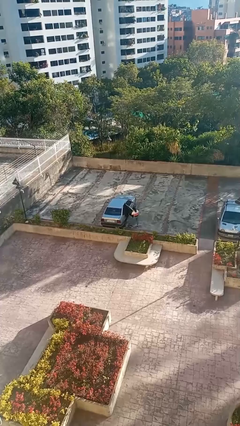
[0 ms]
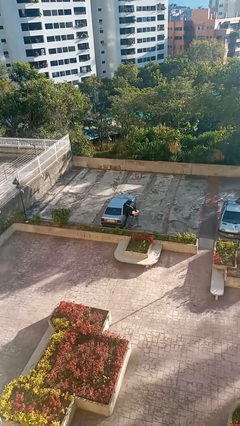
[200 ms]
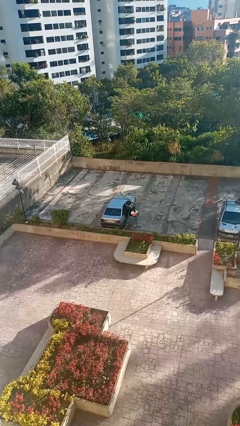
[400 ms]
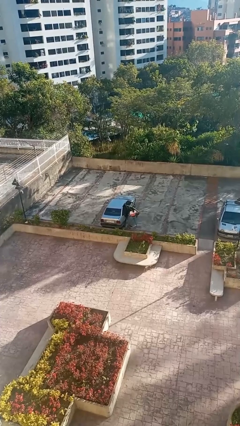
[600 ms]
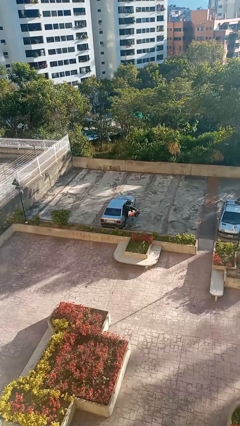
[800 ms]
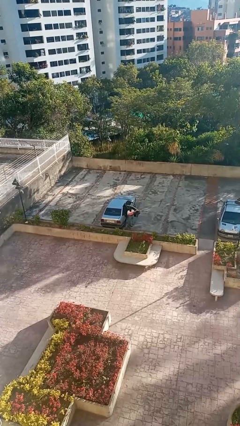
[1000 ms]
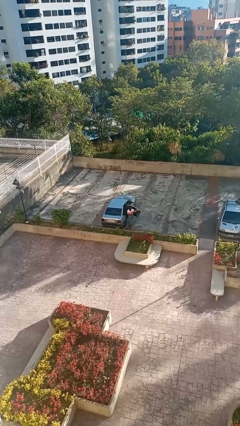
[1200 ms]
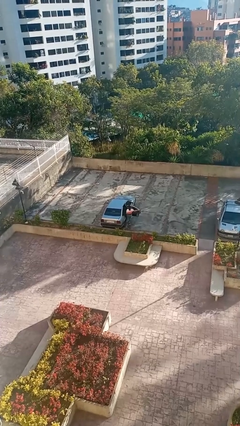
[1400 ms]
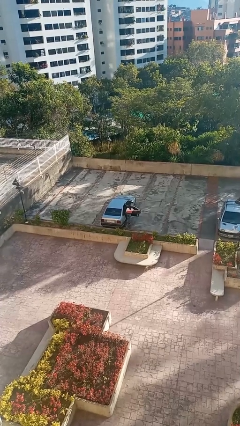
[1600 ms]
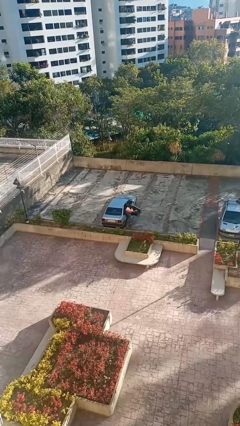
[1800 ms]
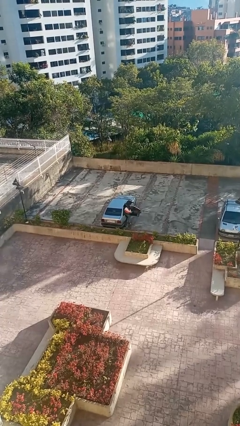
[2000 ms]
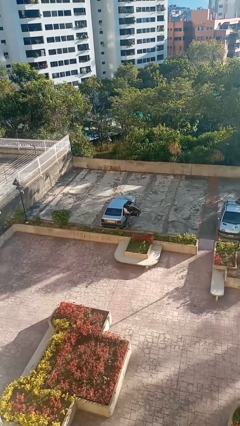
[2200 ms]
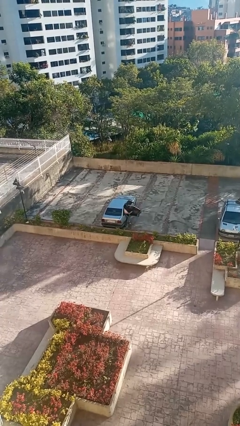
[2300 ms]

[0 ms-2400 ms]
car picks up person

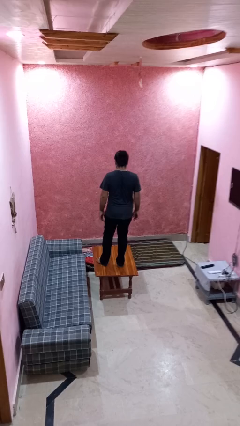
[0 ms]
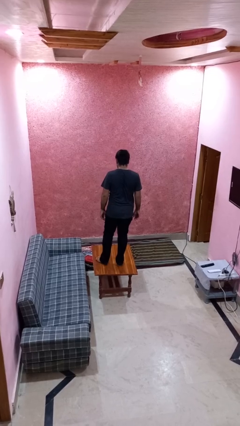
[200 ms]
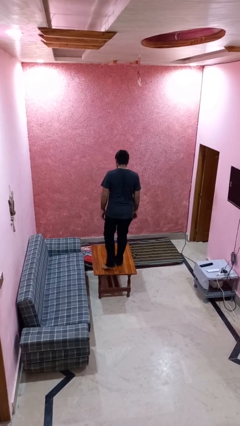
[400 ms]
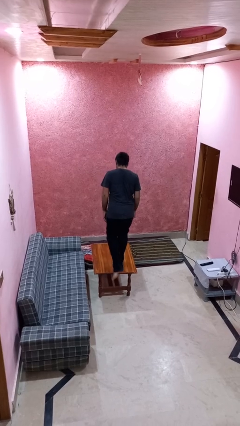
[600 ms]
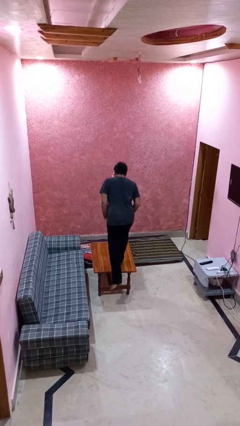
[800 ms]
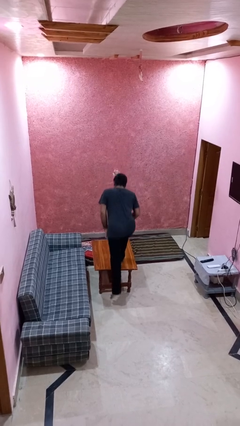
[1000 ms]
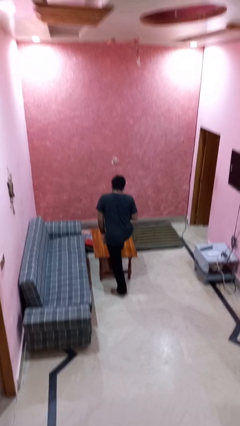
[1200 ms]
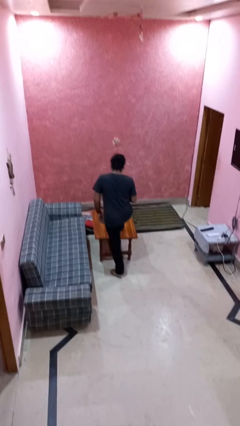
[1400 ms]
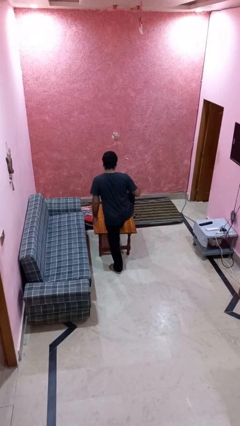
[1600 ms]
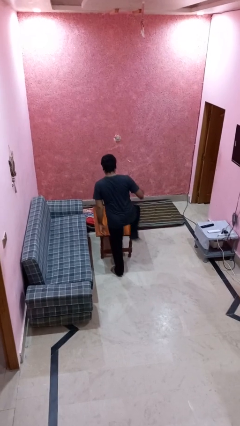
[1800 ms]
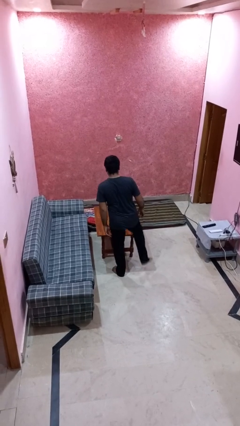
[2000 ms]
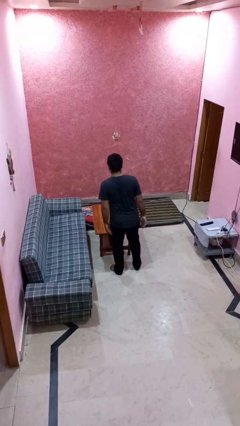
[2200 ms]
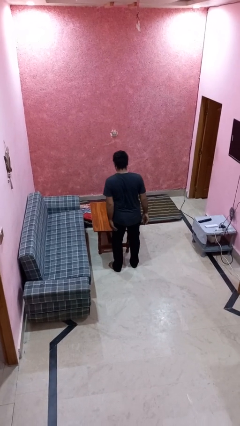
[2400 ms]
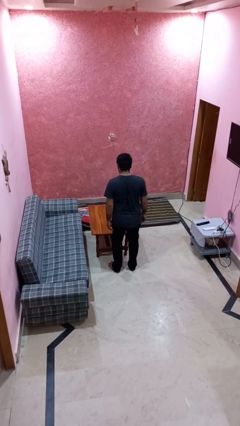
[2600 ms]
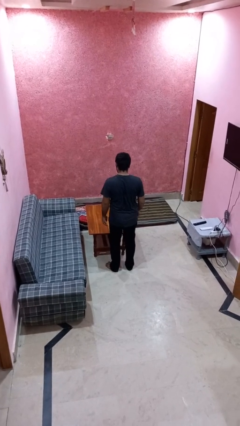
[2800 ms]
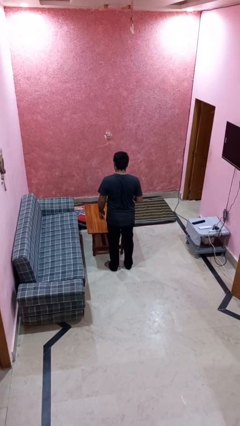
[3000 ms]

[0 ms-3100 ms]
person climbs off table

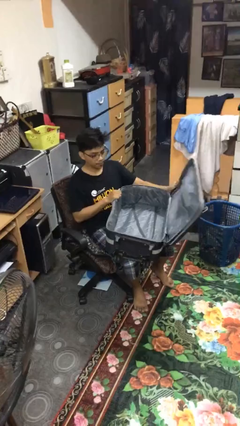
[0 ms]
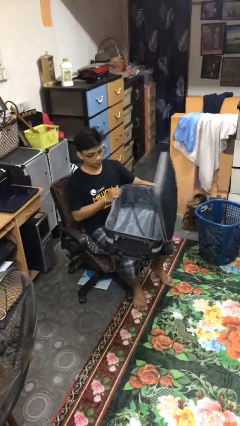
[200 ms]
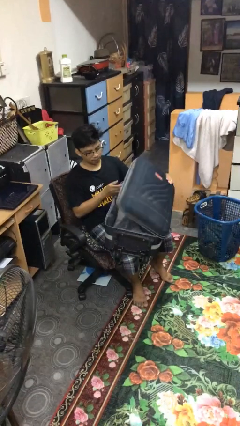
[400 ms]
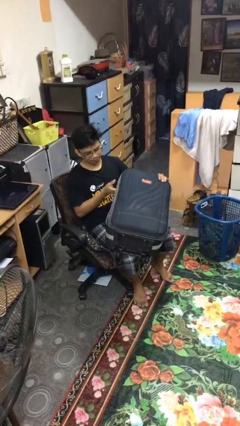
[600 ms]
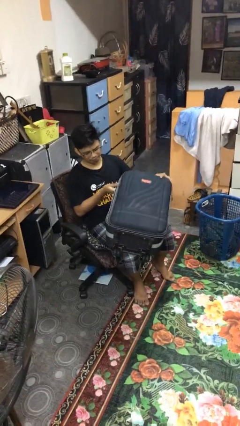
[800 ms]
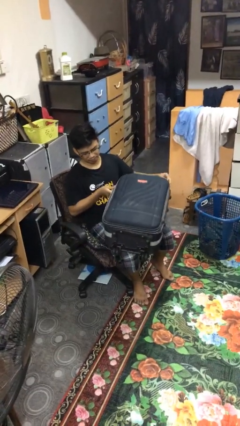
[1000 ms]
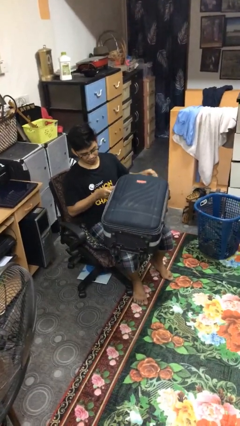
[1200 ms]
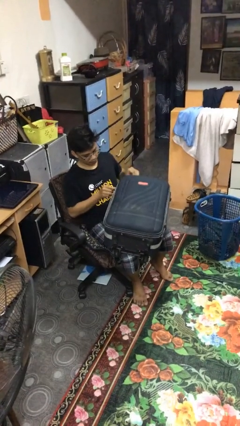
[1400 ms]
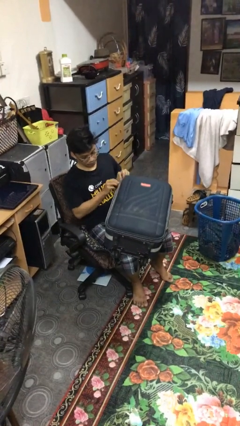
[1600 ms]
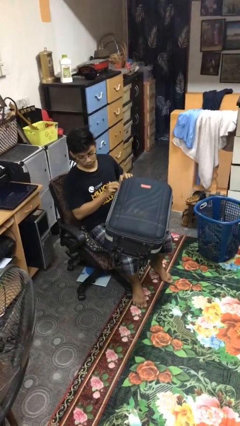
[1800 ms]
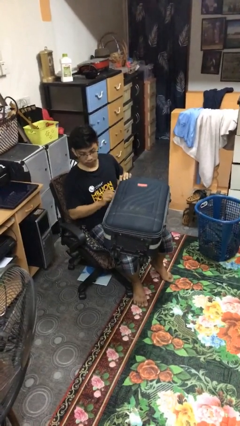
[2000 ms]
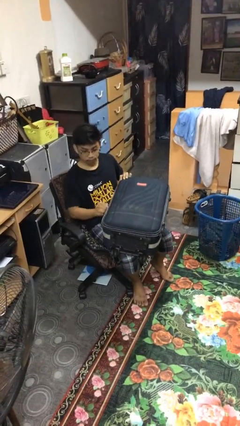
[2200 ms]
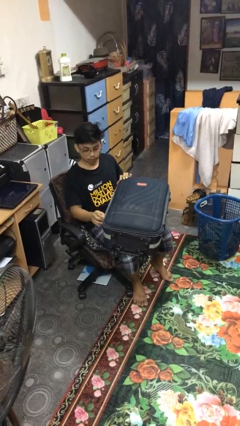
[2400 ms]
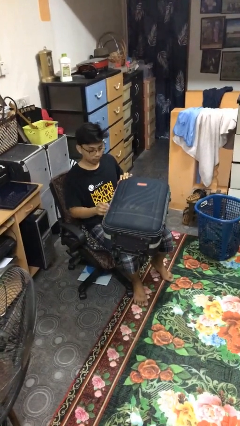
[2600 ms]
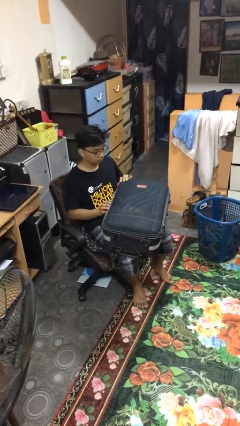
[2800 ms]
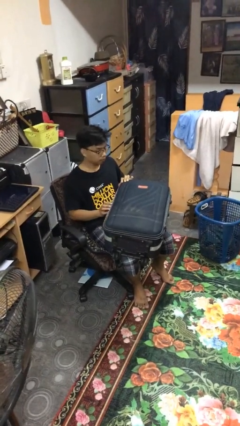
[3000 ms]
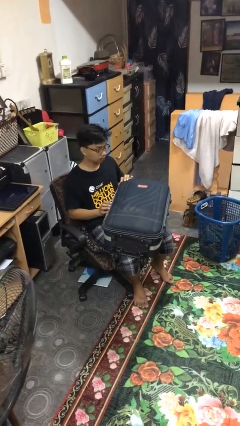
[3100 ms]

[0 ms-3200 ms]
person closes suitcase

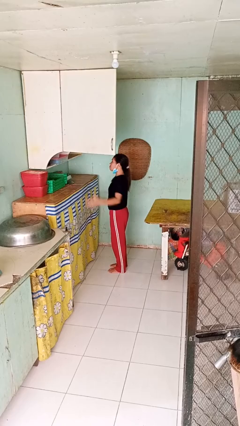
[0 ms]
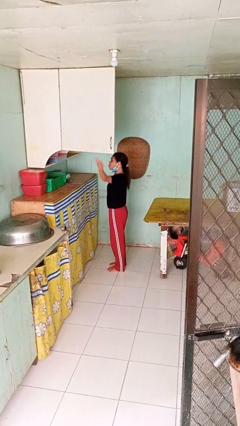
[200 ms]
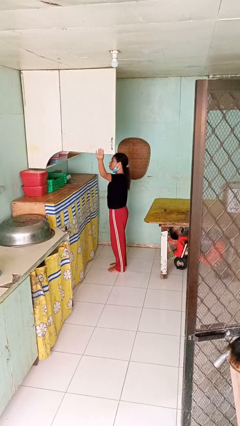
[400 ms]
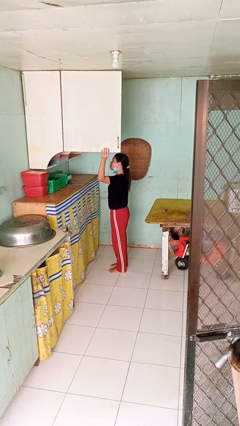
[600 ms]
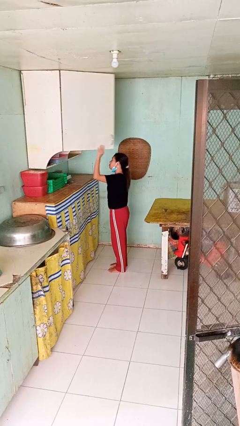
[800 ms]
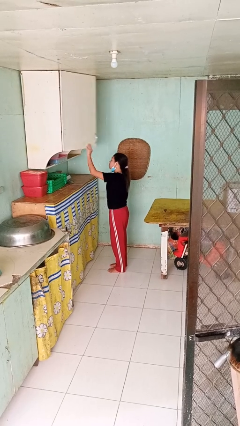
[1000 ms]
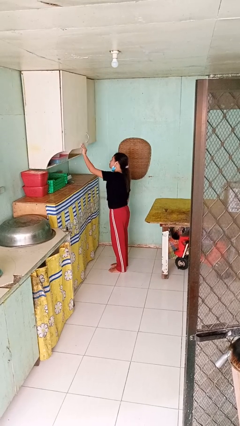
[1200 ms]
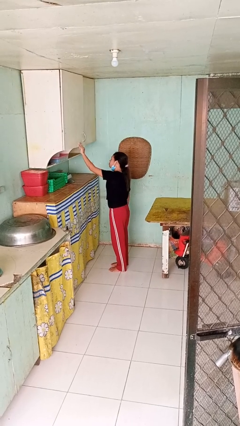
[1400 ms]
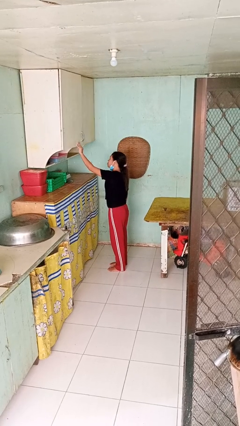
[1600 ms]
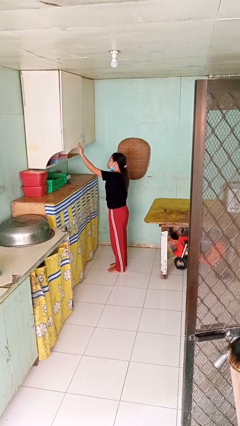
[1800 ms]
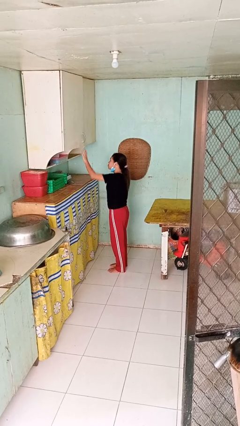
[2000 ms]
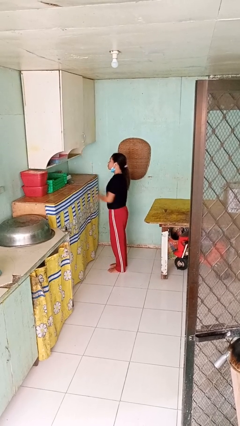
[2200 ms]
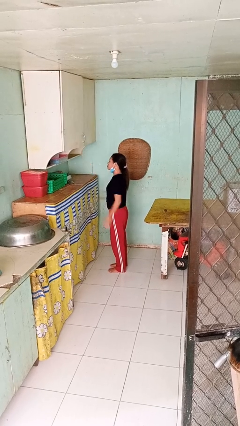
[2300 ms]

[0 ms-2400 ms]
person closes cabinet

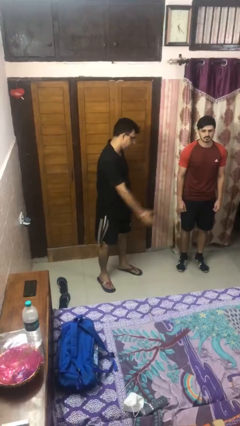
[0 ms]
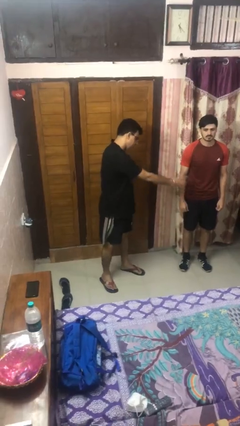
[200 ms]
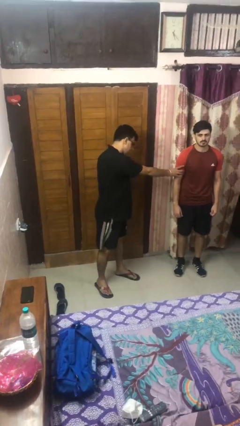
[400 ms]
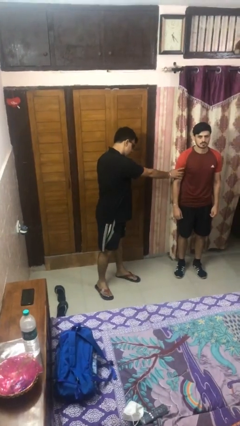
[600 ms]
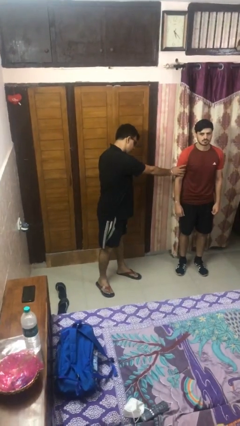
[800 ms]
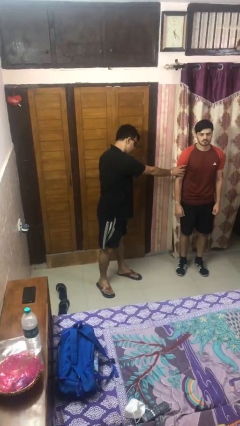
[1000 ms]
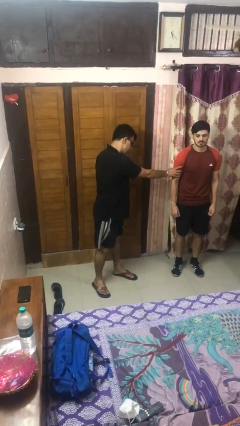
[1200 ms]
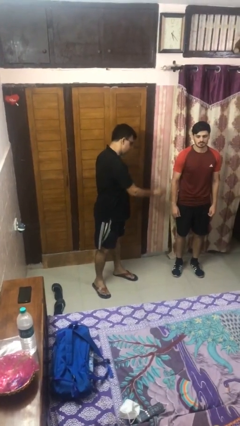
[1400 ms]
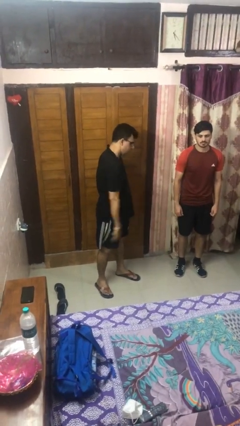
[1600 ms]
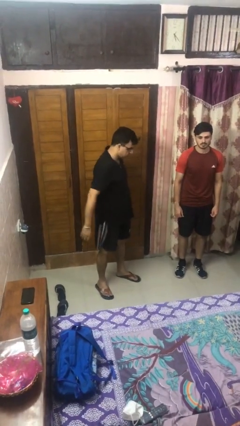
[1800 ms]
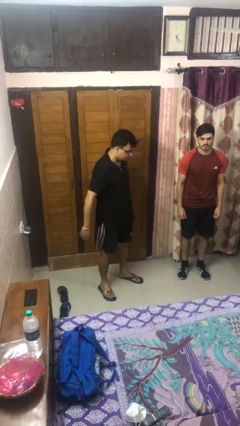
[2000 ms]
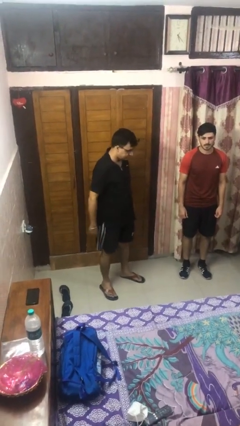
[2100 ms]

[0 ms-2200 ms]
person grabs person by bicep

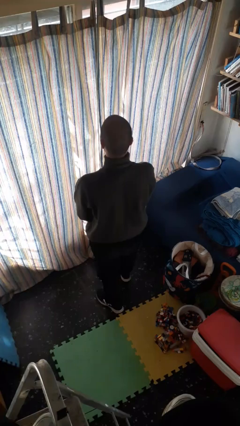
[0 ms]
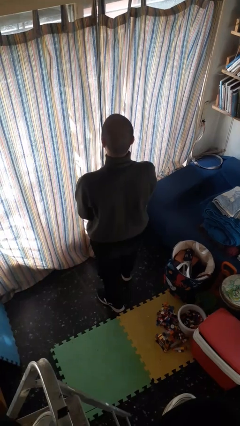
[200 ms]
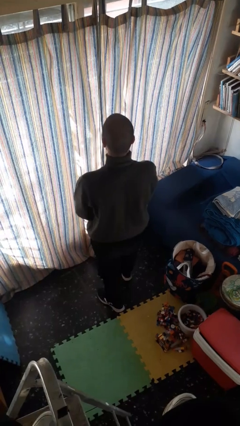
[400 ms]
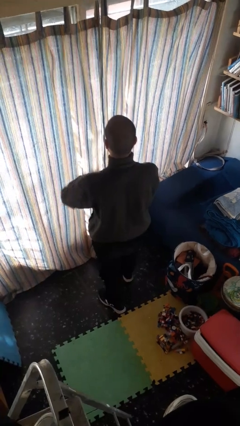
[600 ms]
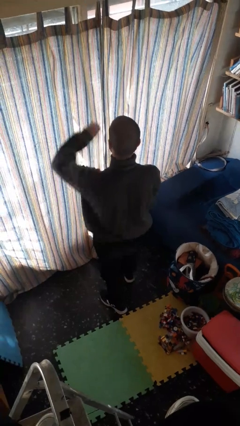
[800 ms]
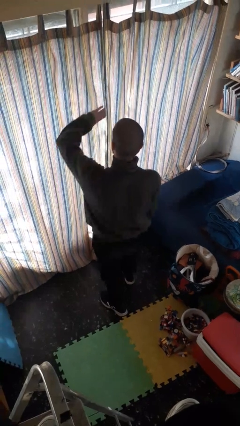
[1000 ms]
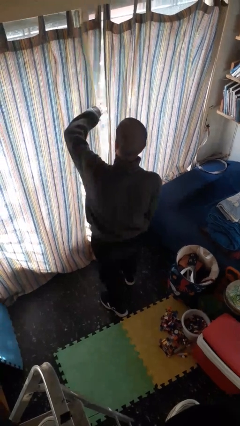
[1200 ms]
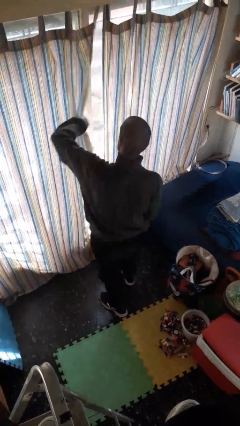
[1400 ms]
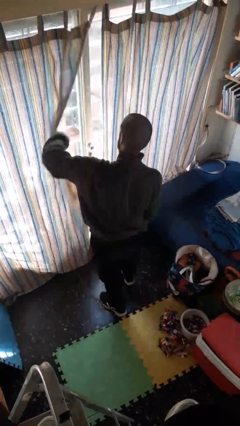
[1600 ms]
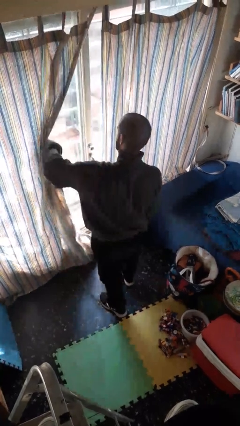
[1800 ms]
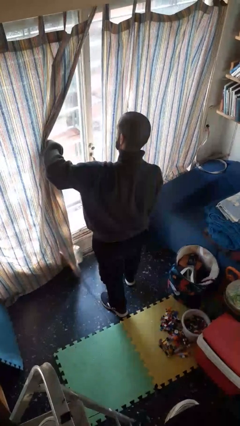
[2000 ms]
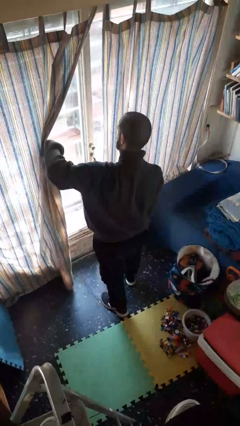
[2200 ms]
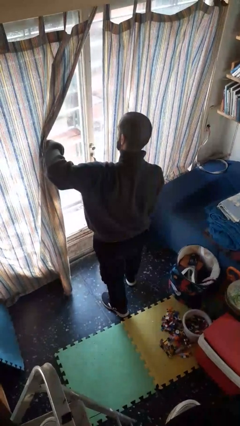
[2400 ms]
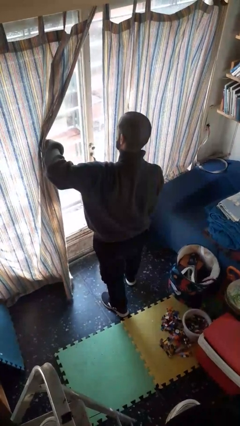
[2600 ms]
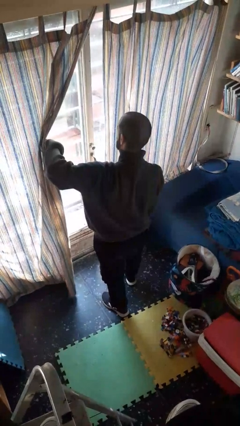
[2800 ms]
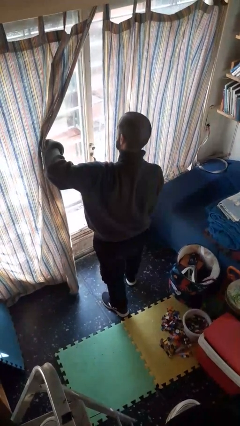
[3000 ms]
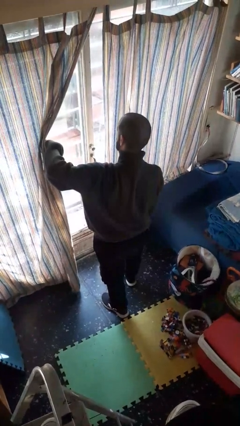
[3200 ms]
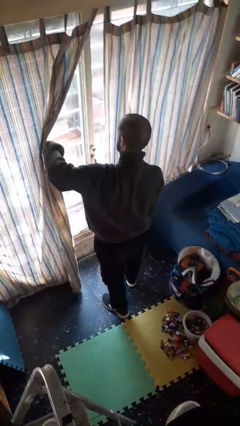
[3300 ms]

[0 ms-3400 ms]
person opens curtains

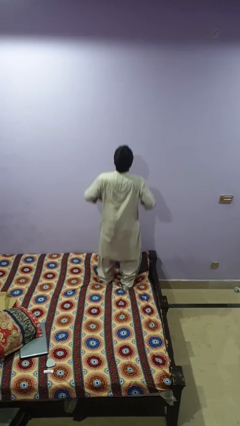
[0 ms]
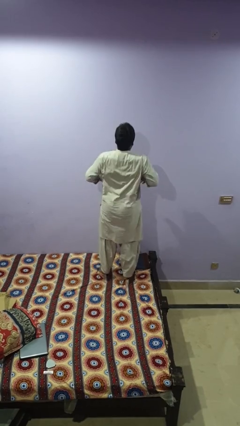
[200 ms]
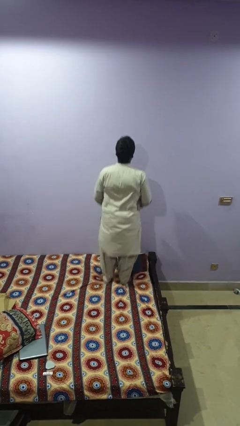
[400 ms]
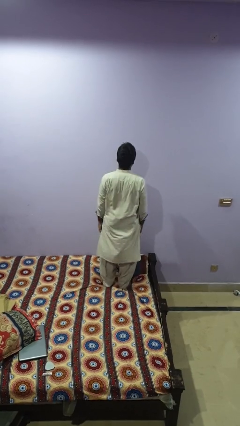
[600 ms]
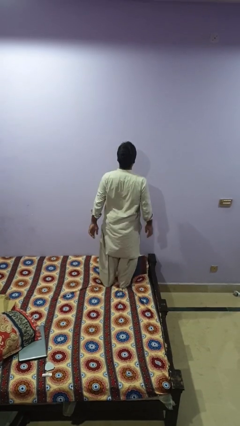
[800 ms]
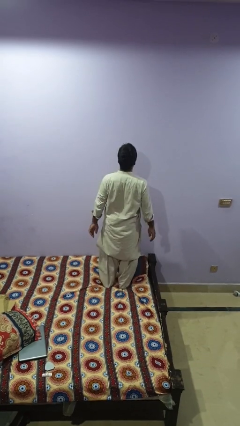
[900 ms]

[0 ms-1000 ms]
person jumps on bed
